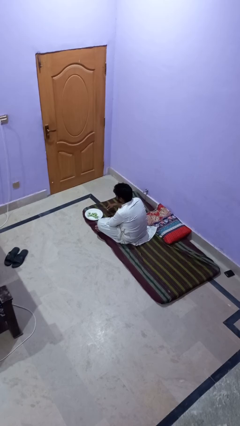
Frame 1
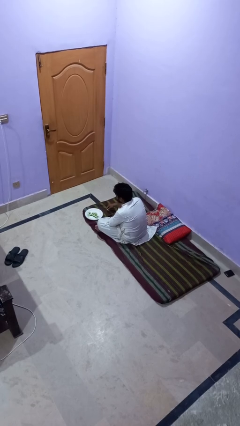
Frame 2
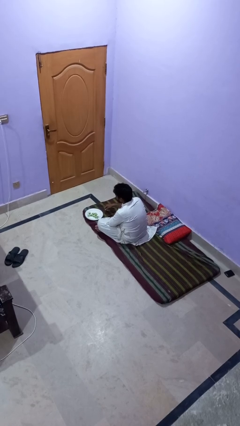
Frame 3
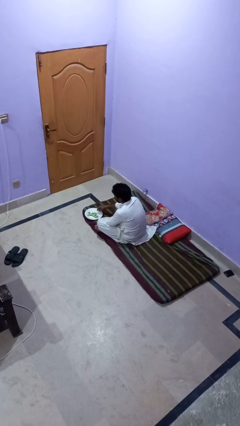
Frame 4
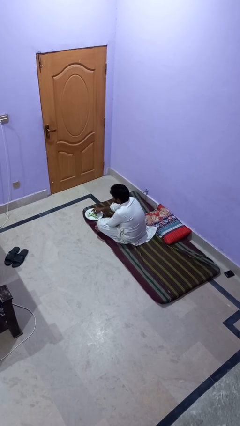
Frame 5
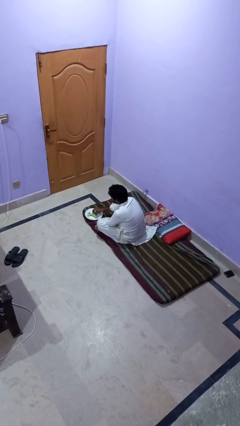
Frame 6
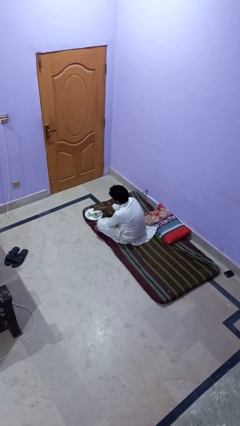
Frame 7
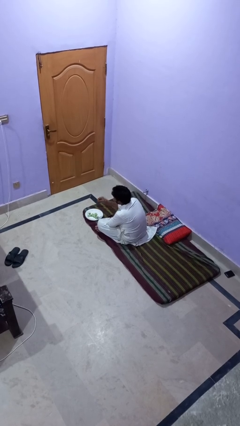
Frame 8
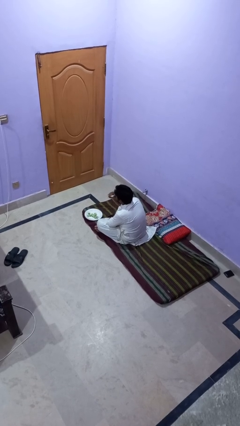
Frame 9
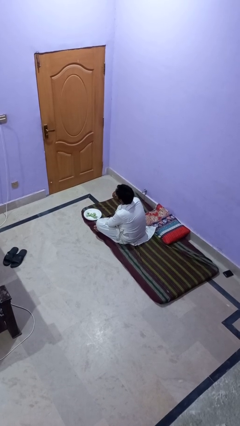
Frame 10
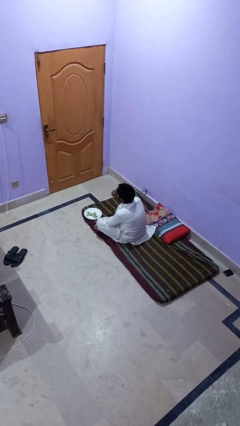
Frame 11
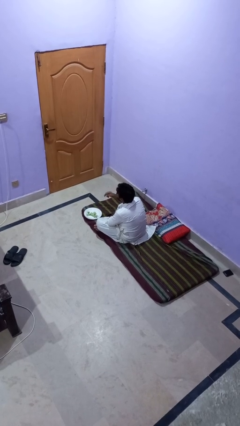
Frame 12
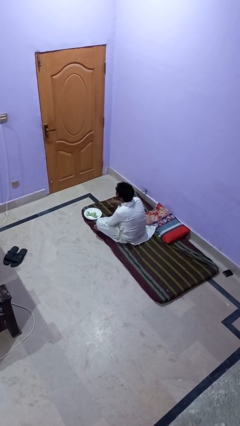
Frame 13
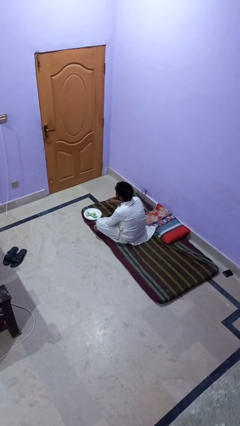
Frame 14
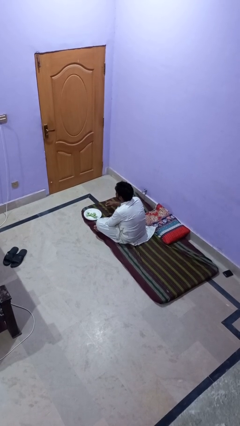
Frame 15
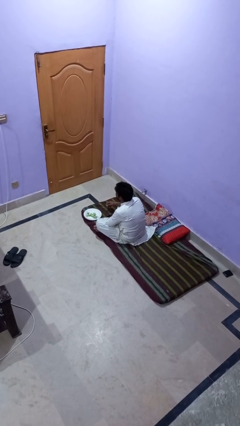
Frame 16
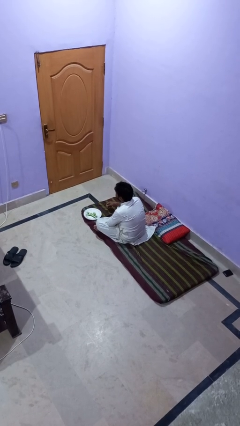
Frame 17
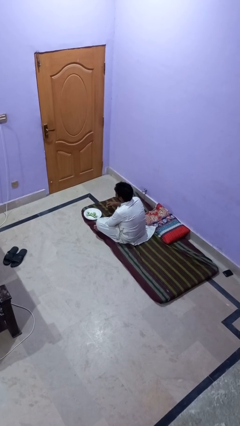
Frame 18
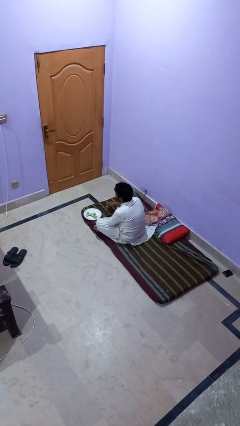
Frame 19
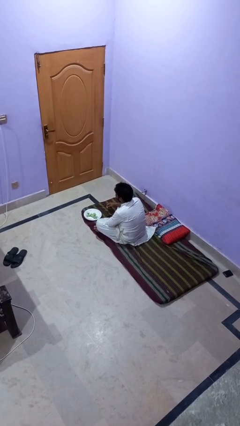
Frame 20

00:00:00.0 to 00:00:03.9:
person eats with hands

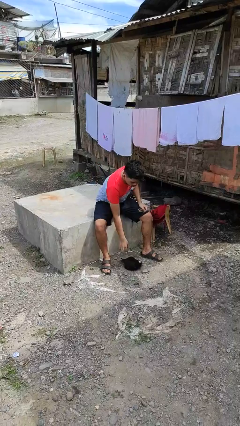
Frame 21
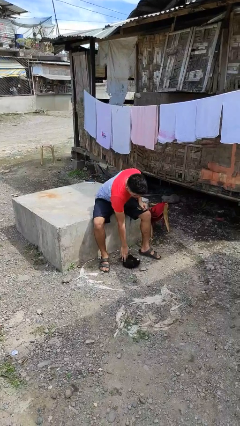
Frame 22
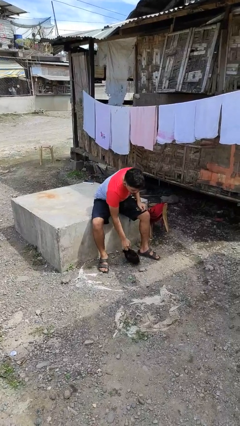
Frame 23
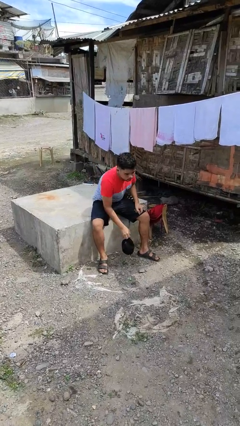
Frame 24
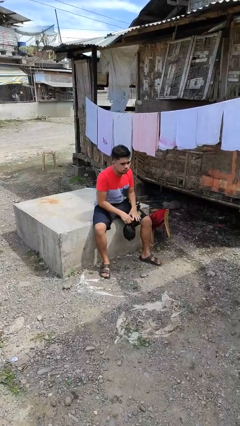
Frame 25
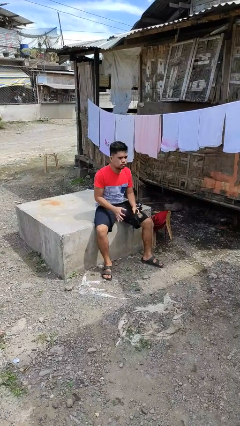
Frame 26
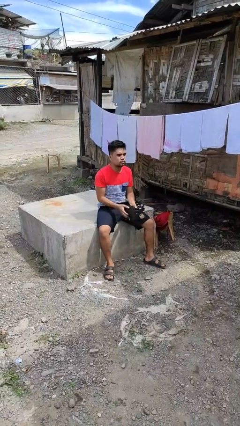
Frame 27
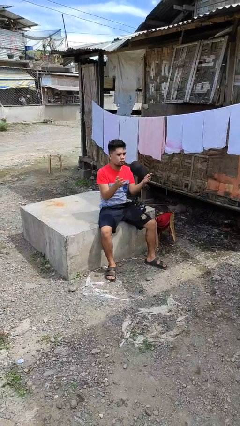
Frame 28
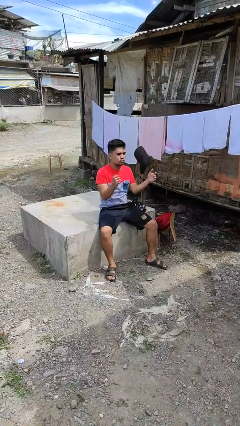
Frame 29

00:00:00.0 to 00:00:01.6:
person picks up object from floor

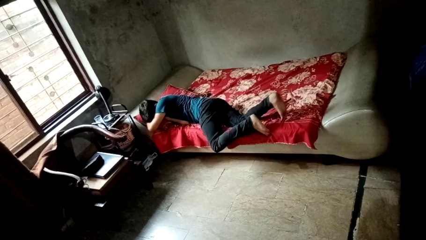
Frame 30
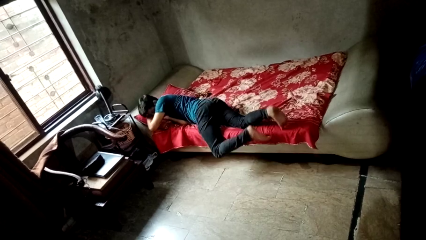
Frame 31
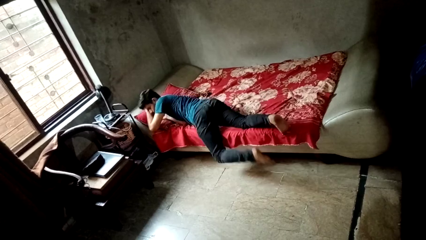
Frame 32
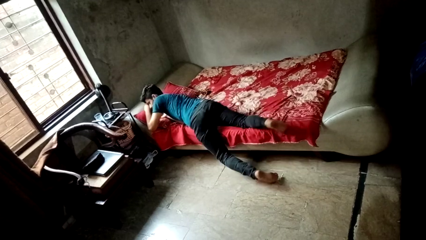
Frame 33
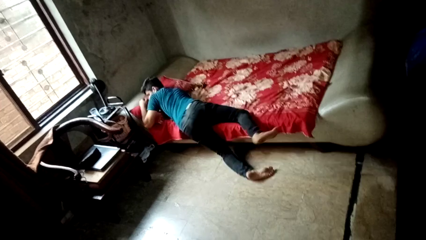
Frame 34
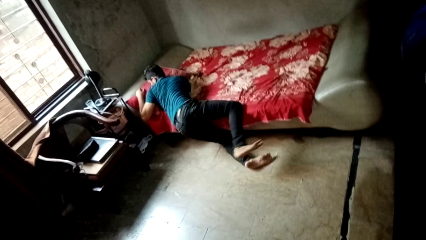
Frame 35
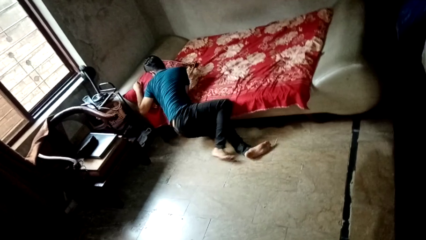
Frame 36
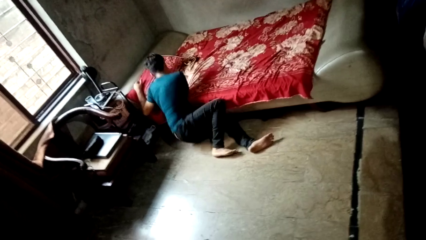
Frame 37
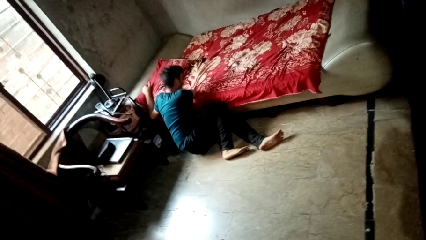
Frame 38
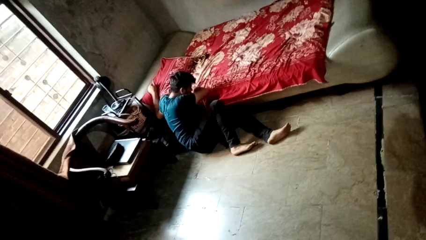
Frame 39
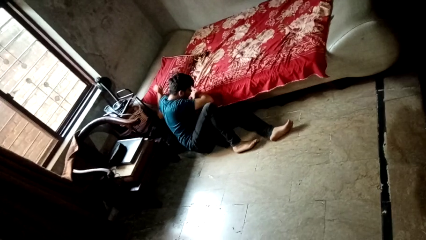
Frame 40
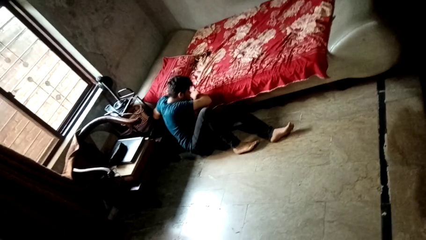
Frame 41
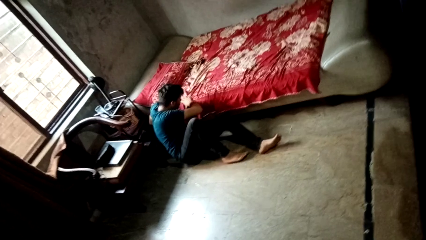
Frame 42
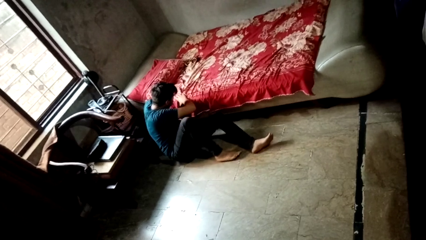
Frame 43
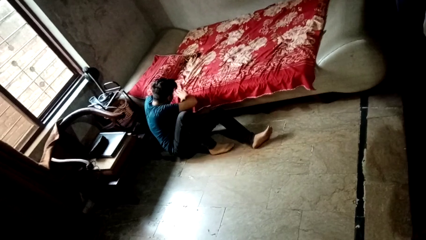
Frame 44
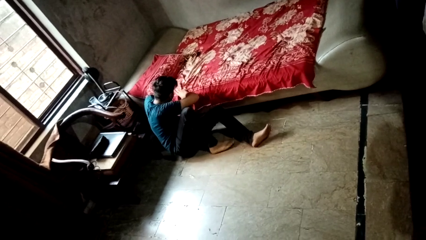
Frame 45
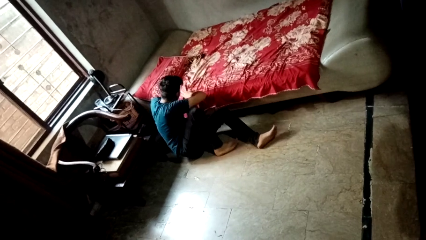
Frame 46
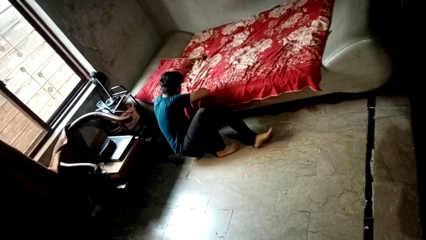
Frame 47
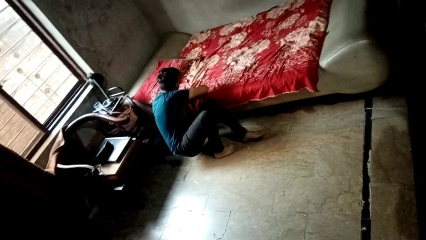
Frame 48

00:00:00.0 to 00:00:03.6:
person falls from bed

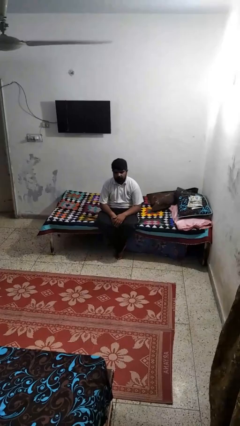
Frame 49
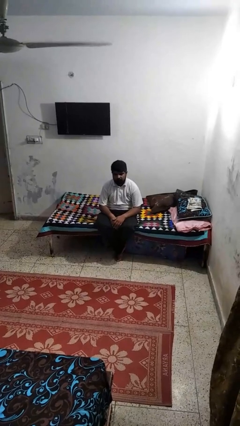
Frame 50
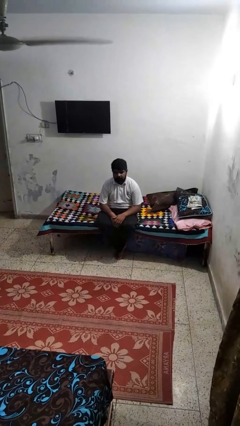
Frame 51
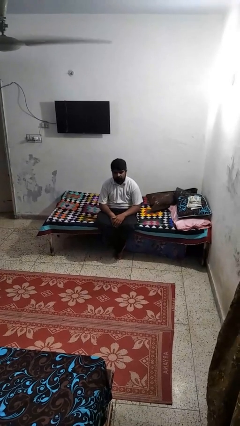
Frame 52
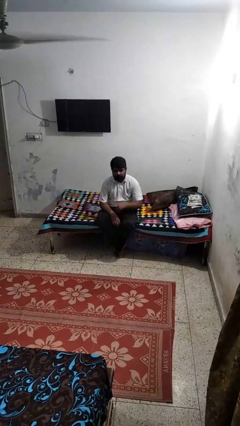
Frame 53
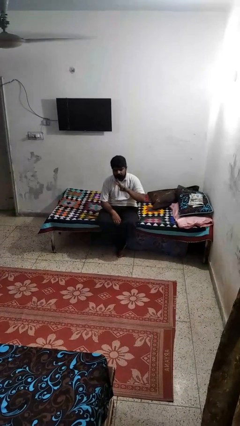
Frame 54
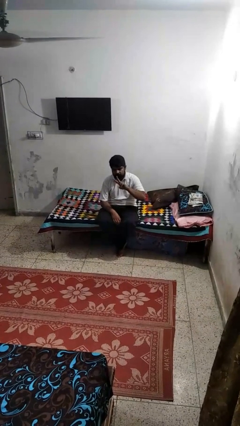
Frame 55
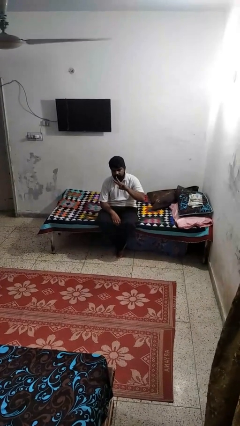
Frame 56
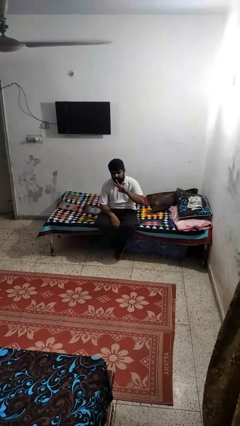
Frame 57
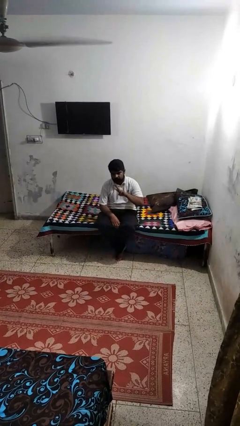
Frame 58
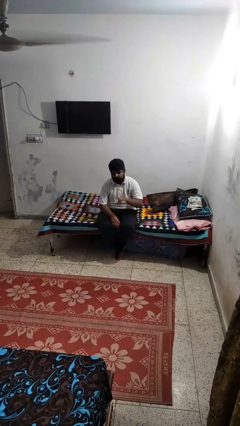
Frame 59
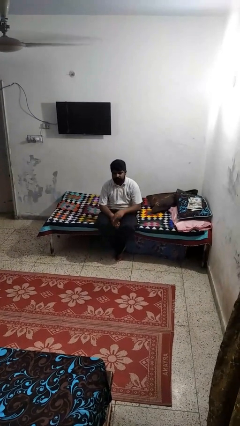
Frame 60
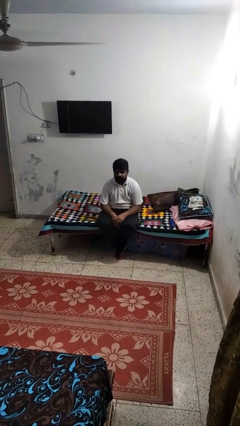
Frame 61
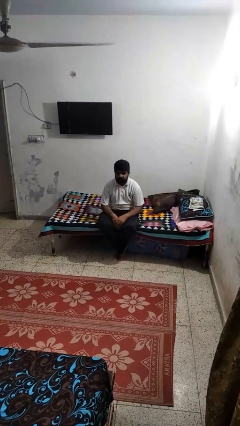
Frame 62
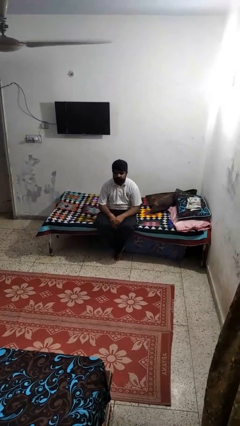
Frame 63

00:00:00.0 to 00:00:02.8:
person gestures peace

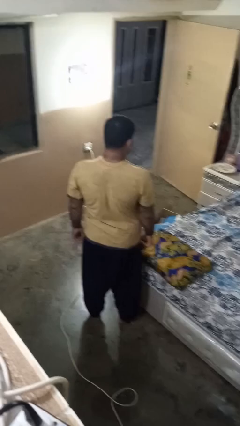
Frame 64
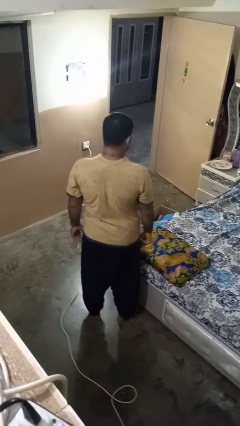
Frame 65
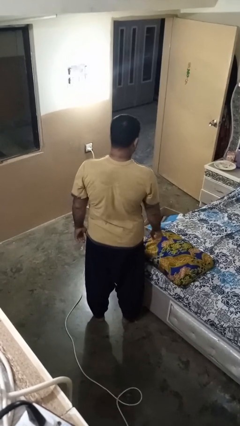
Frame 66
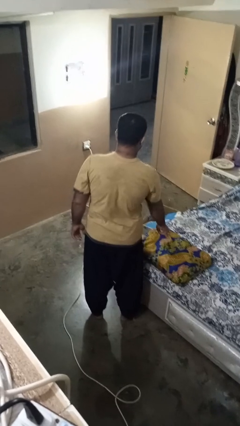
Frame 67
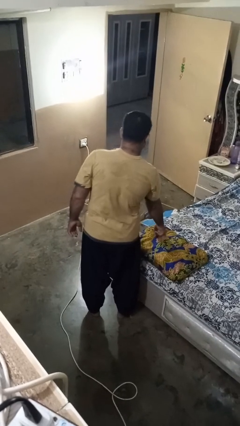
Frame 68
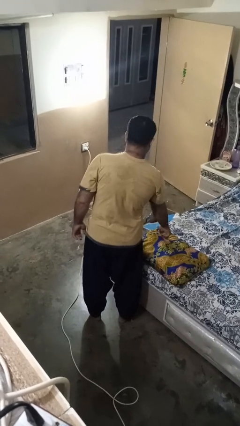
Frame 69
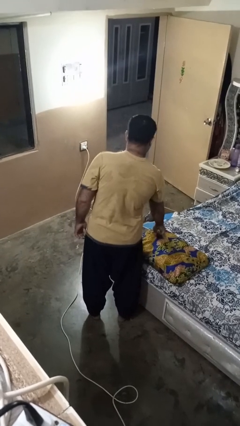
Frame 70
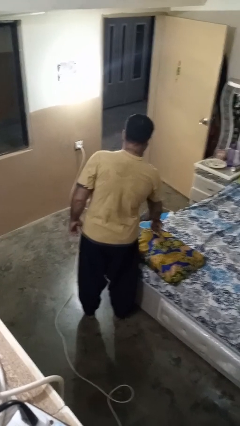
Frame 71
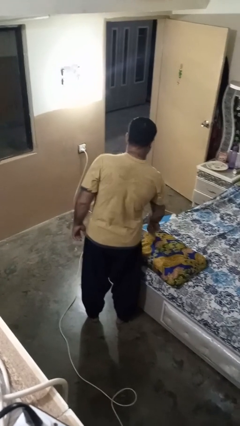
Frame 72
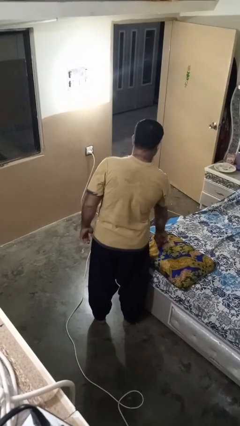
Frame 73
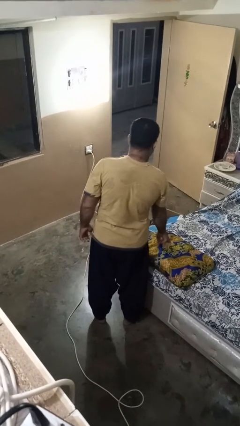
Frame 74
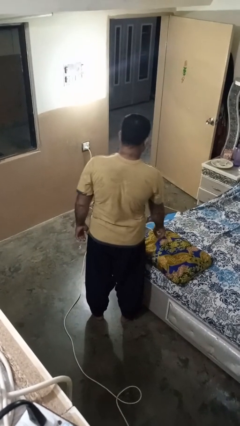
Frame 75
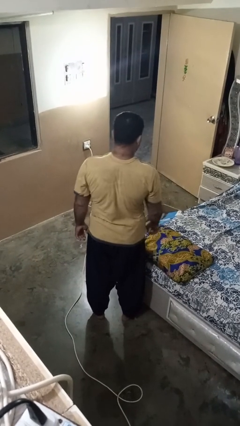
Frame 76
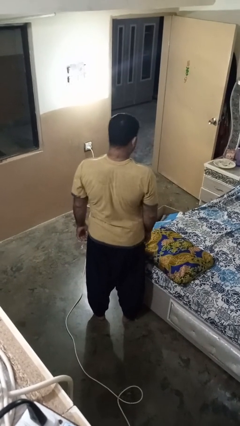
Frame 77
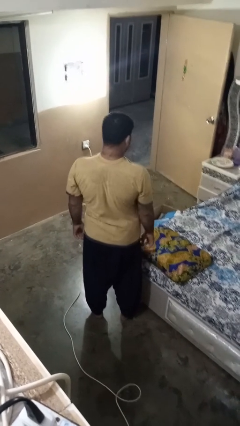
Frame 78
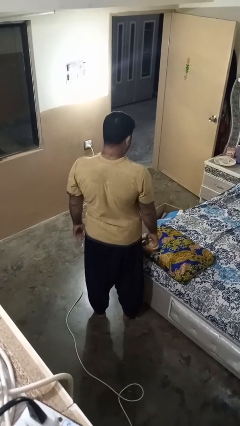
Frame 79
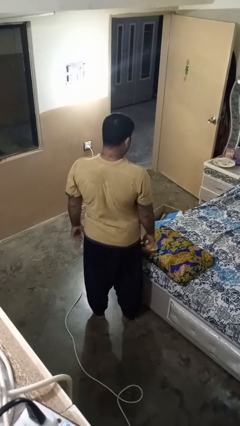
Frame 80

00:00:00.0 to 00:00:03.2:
person taps object with finger

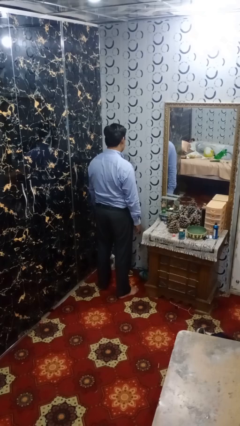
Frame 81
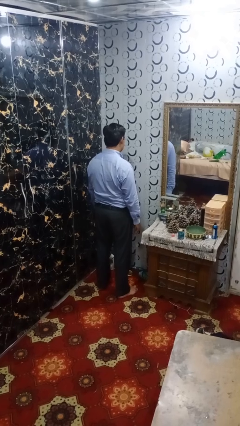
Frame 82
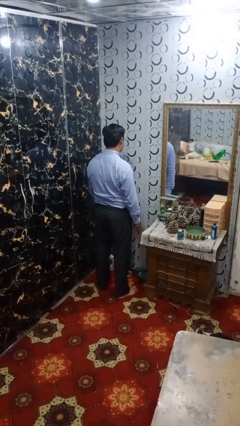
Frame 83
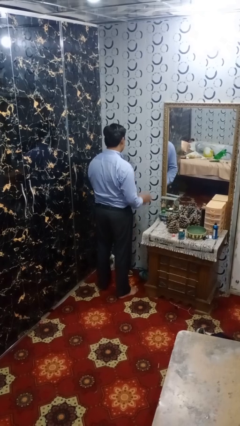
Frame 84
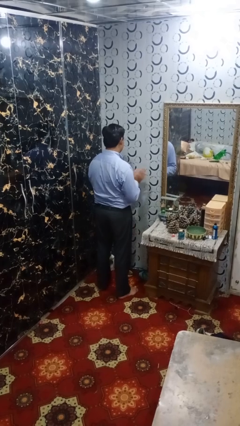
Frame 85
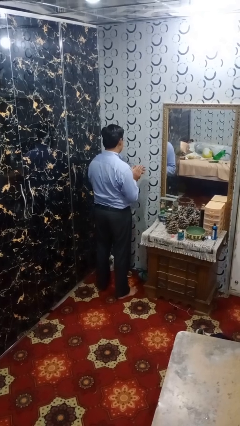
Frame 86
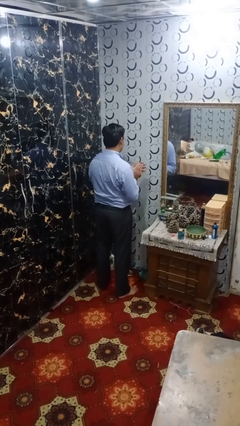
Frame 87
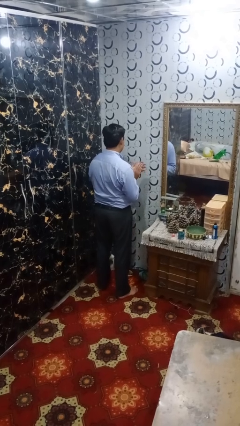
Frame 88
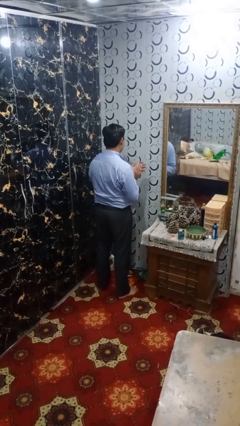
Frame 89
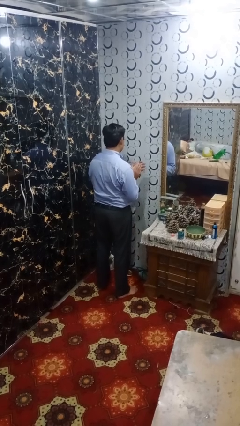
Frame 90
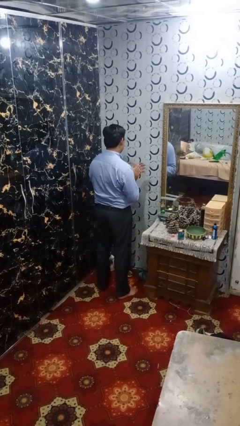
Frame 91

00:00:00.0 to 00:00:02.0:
person claps hands

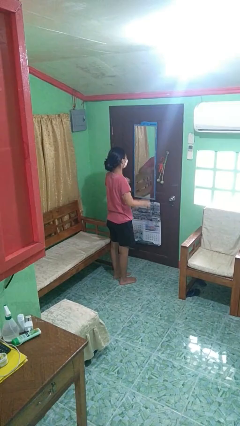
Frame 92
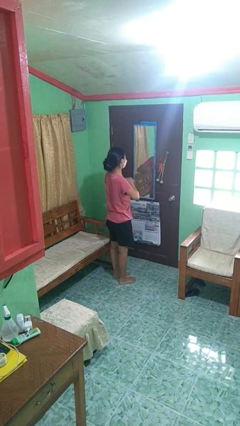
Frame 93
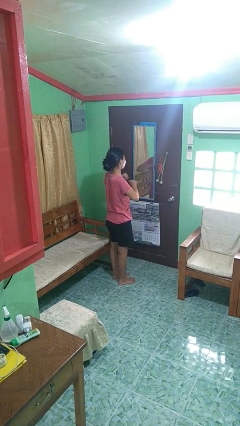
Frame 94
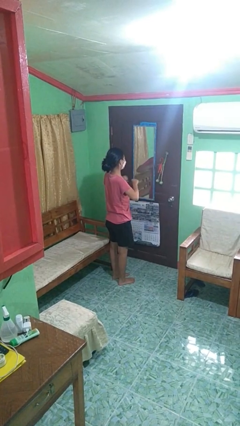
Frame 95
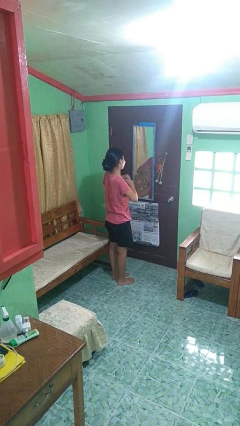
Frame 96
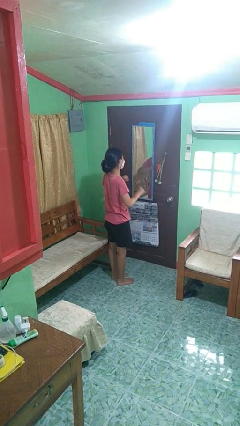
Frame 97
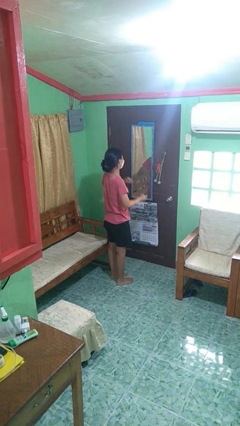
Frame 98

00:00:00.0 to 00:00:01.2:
person drums on chest
